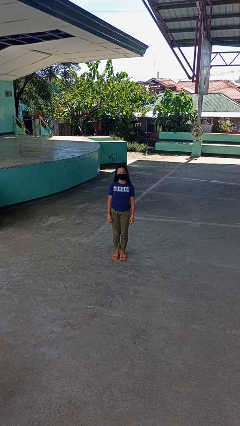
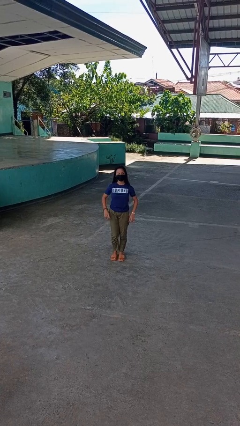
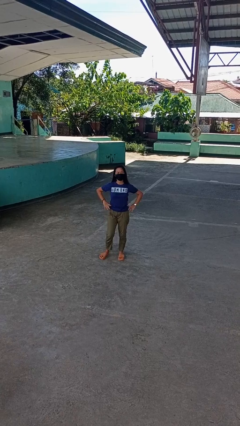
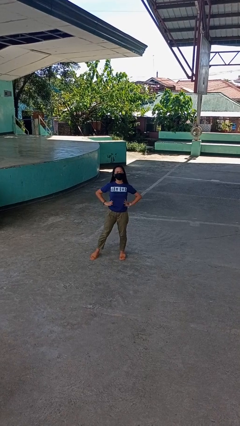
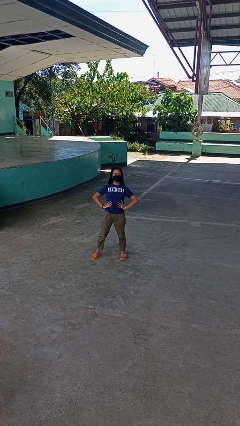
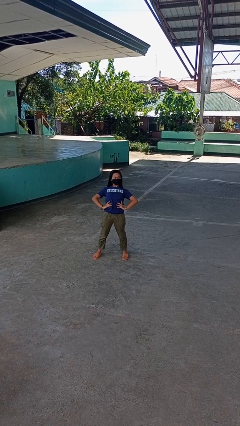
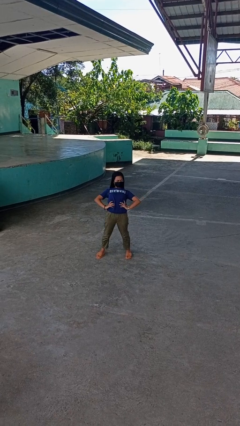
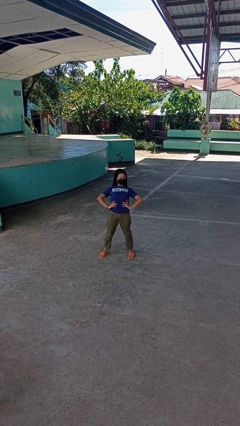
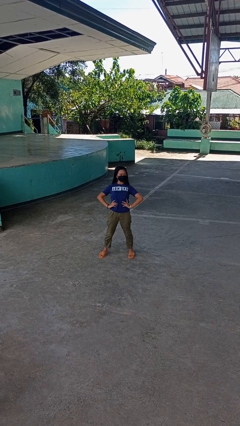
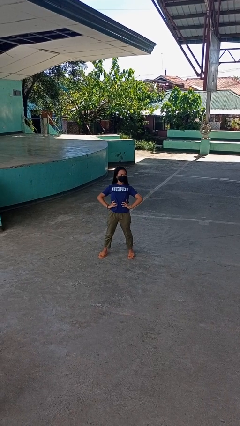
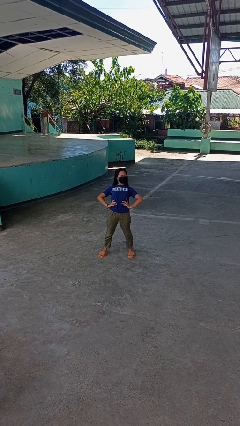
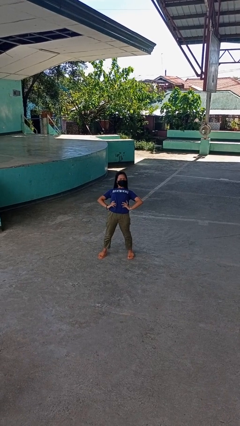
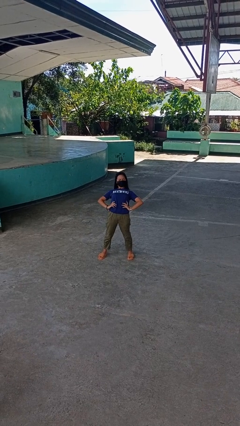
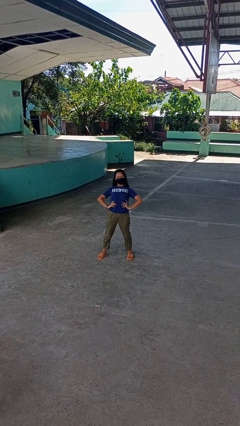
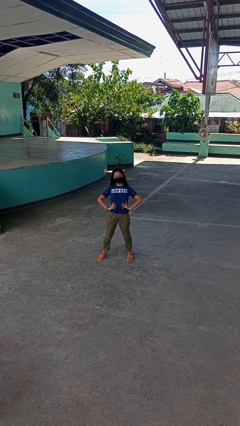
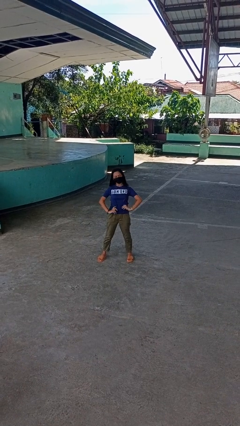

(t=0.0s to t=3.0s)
person stretches back

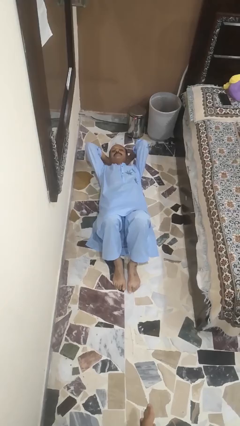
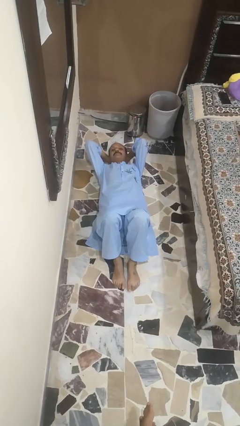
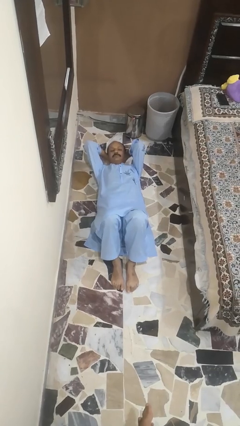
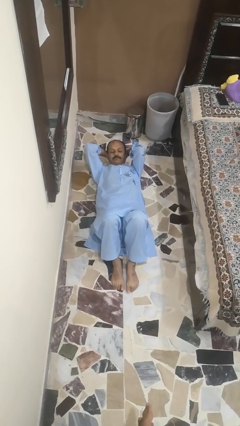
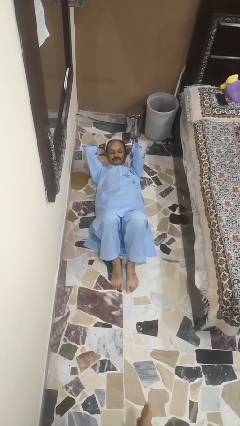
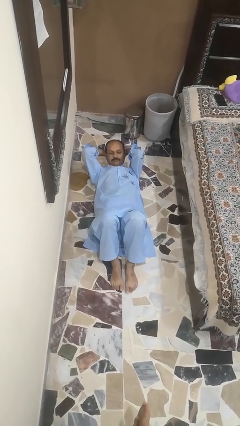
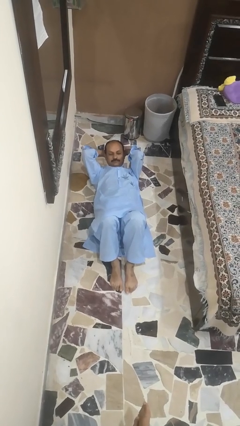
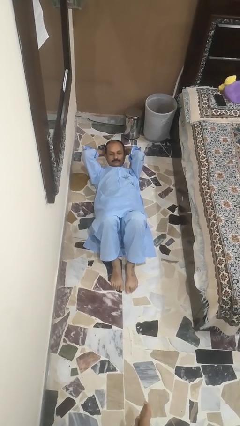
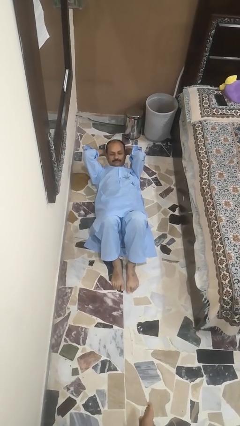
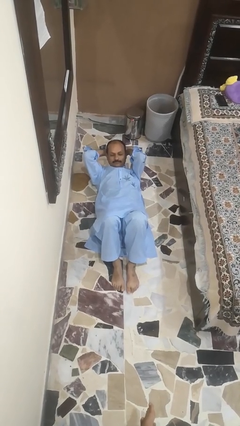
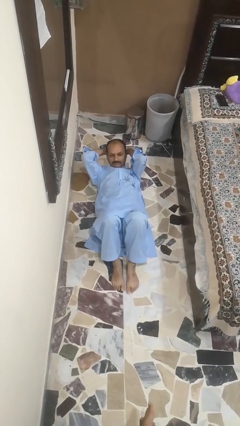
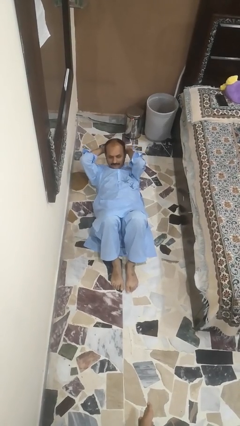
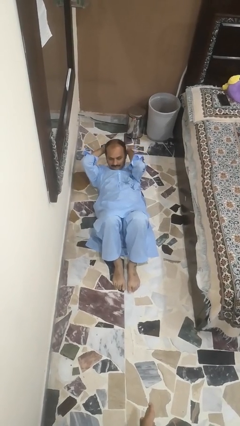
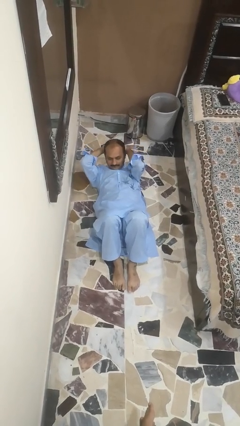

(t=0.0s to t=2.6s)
person exercises with situp

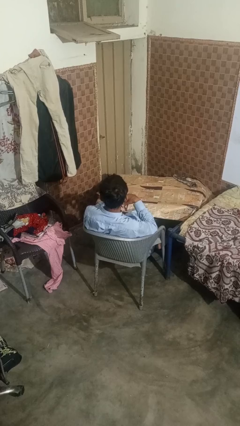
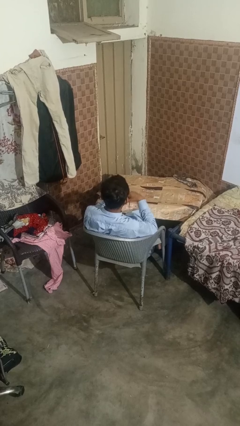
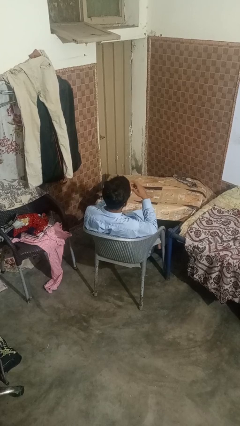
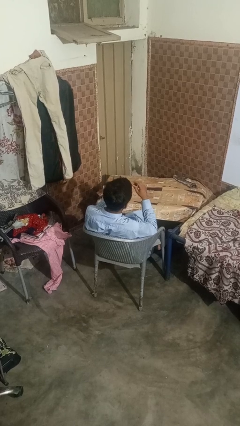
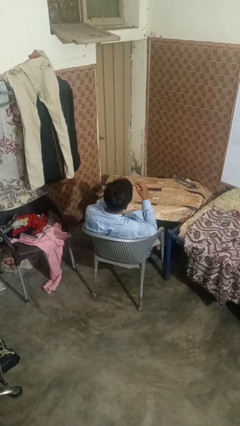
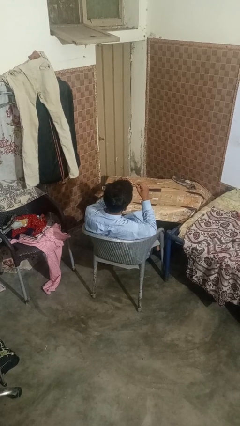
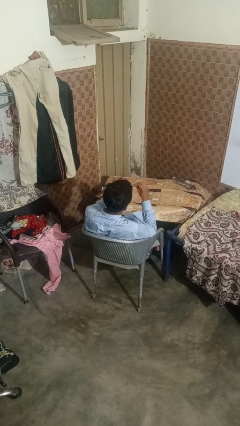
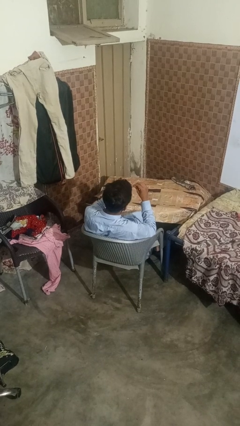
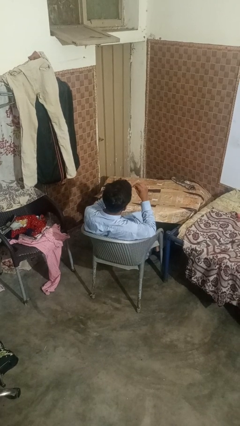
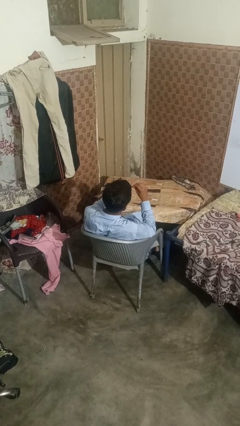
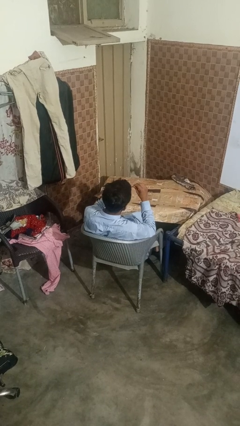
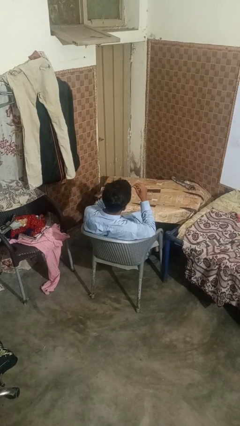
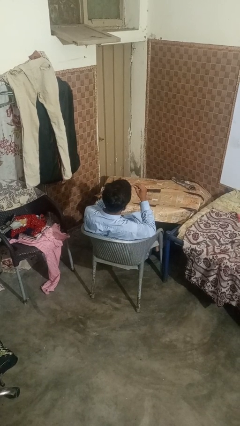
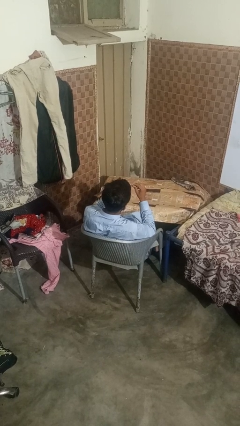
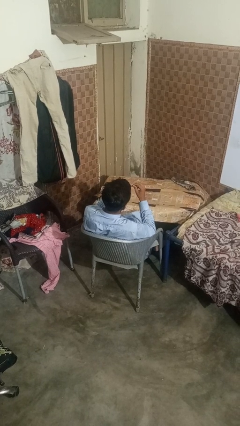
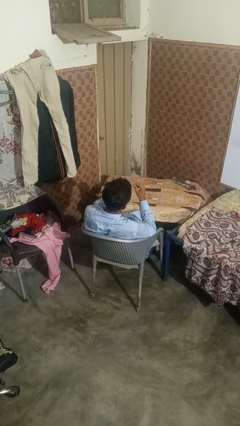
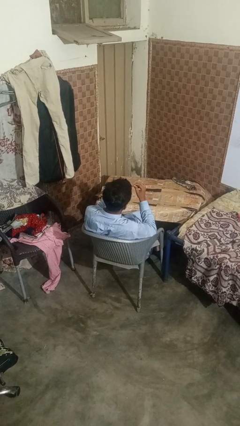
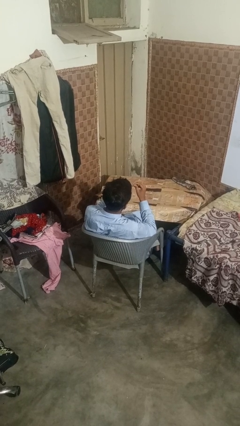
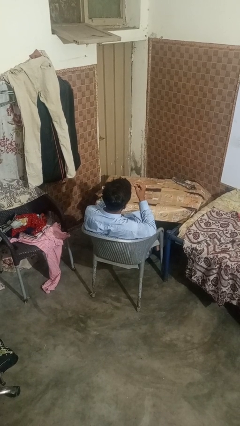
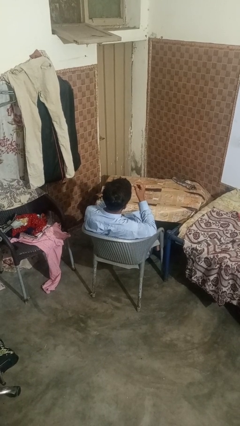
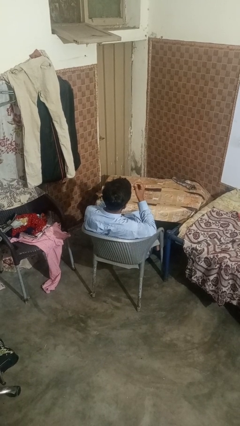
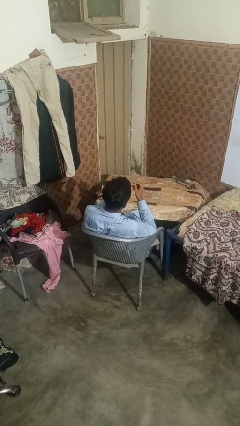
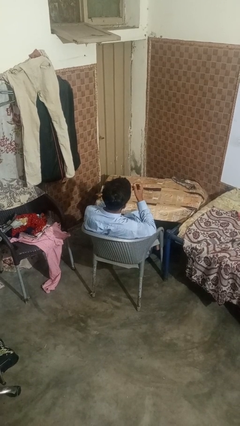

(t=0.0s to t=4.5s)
person clips fingernails

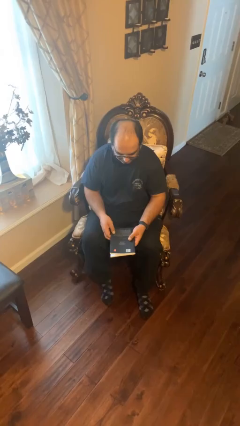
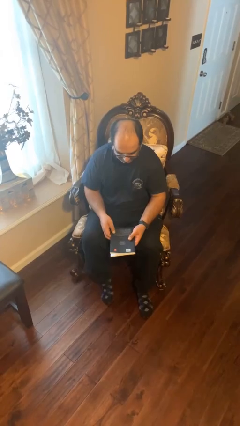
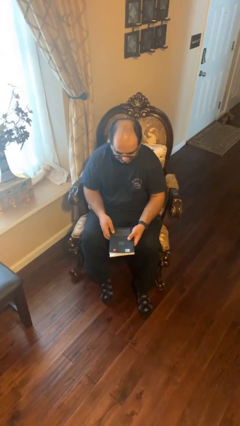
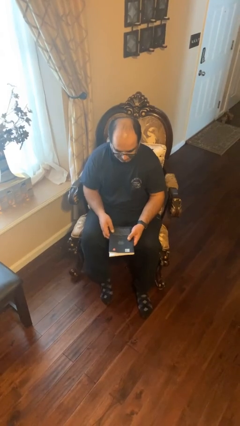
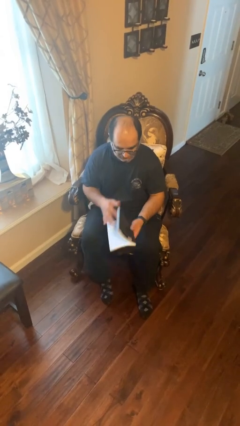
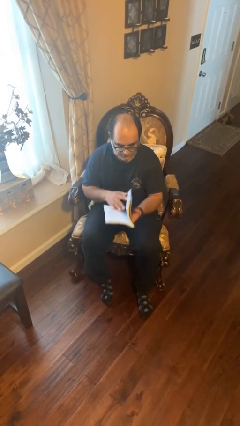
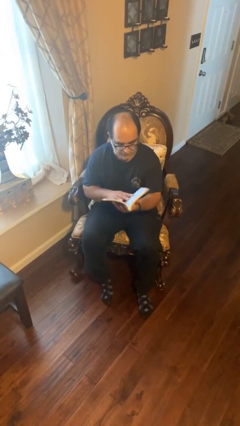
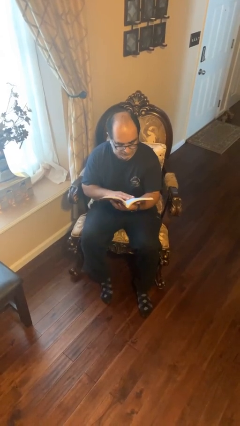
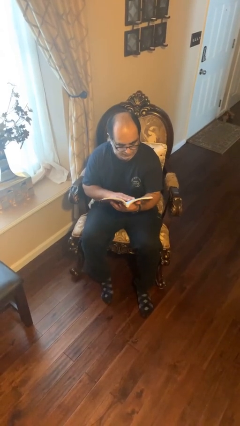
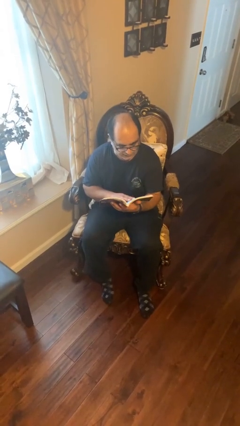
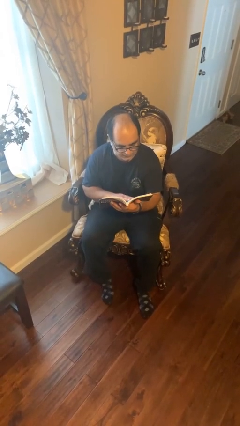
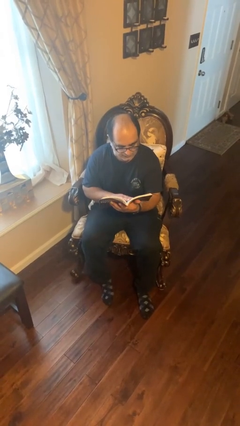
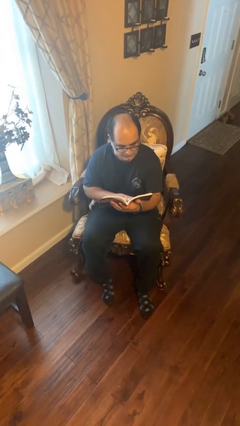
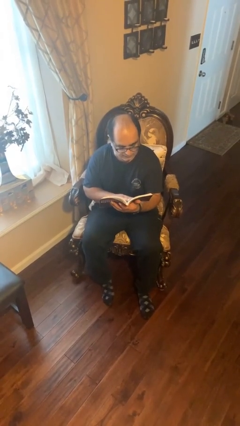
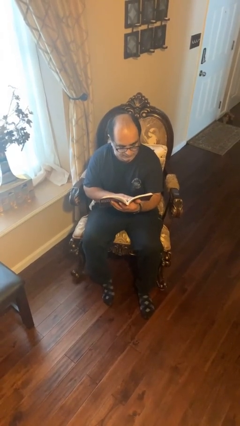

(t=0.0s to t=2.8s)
person reads document

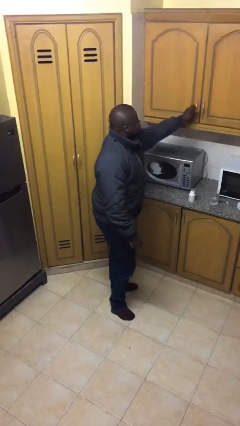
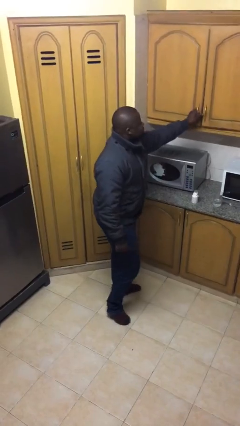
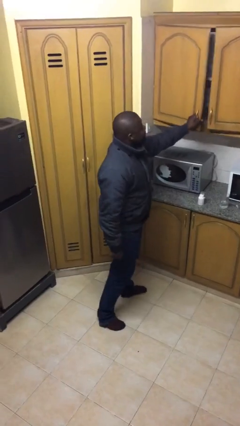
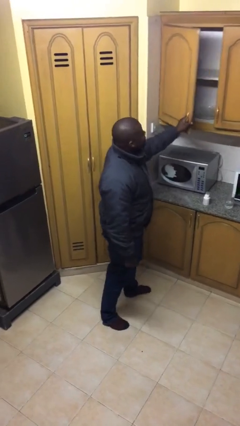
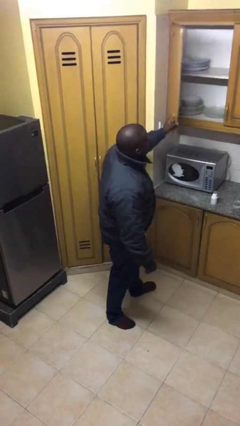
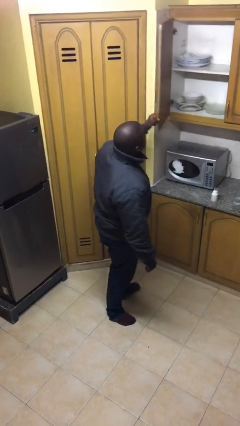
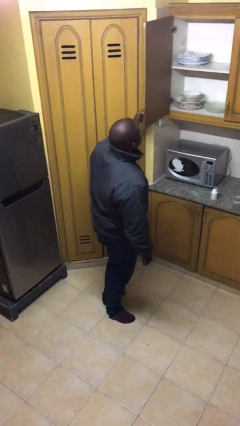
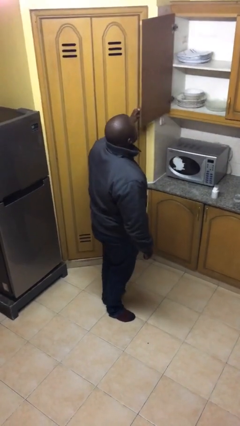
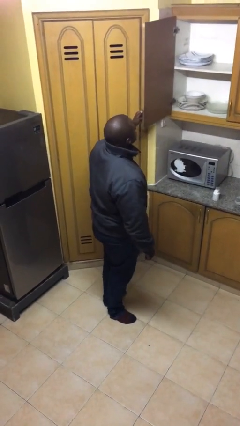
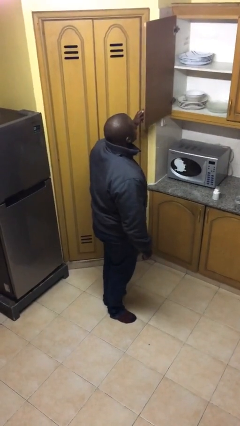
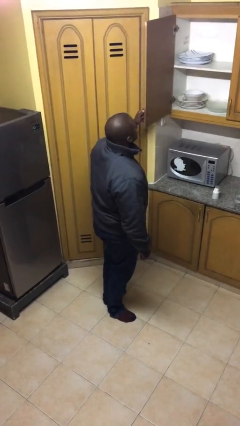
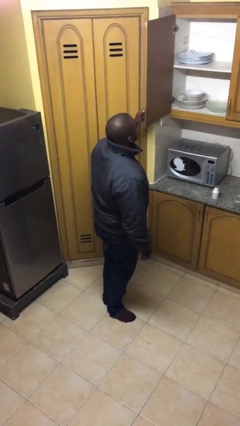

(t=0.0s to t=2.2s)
person closes cabinet

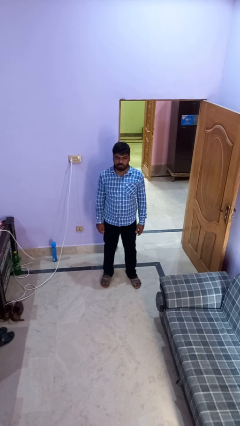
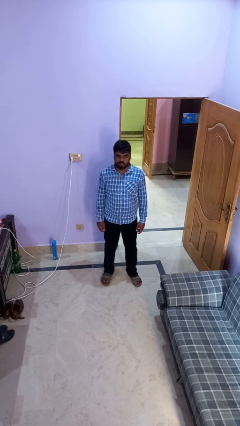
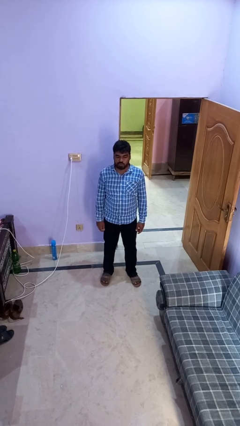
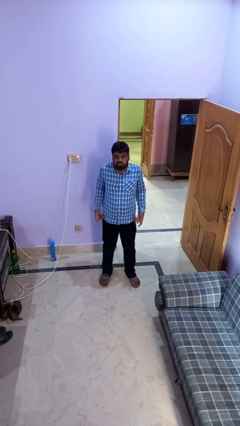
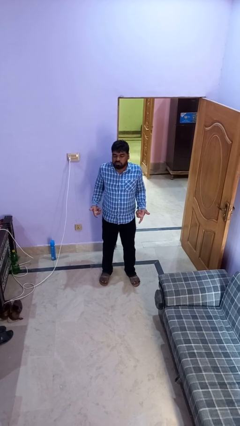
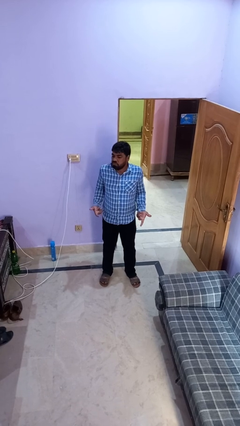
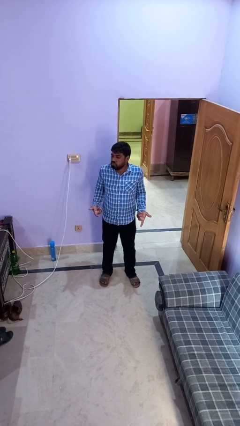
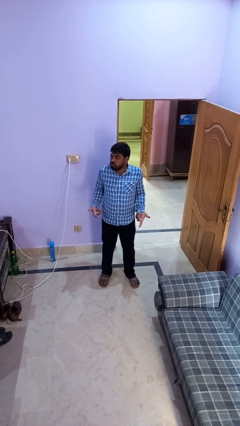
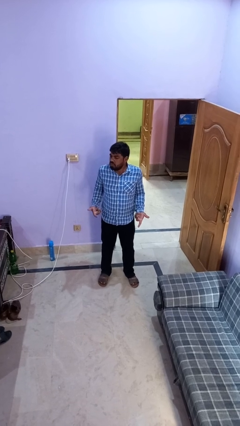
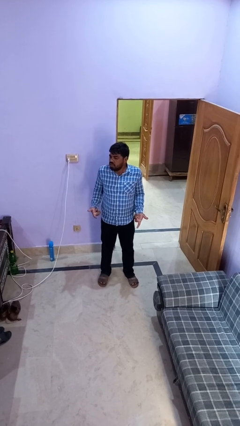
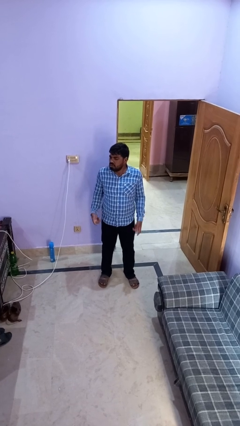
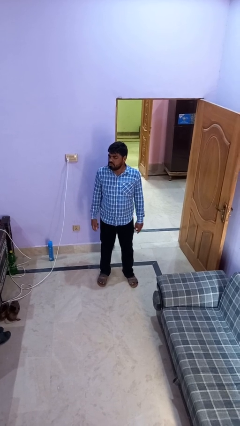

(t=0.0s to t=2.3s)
person shrugs

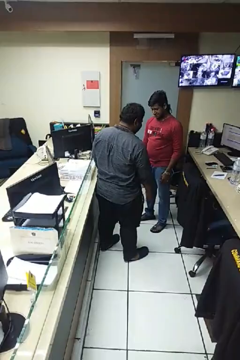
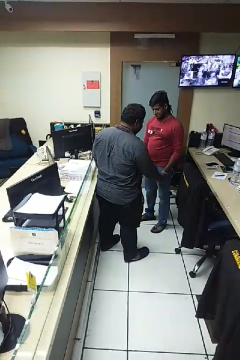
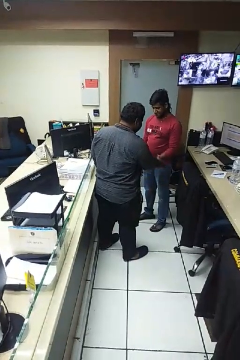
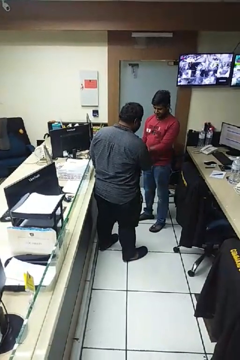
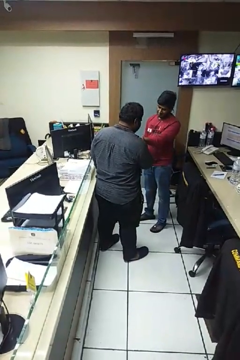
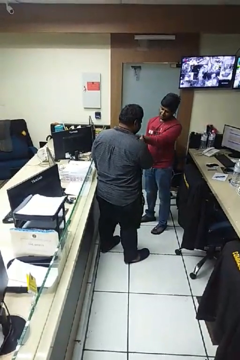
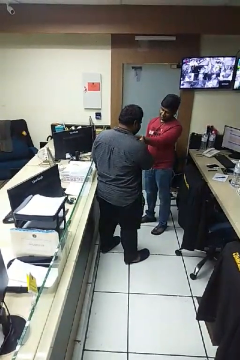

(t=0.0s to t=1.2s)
person grabs person by forearm
